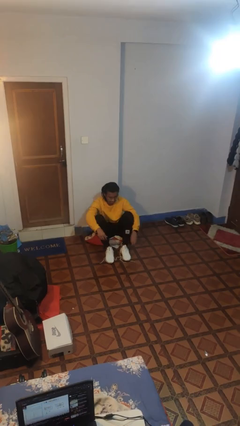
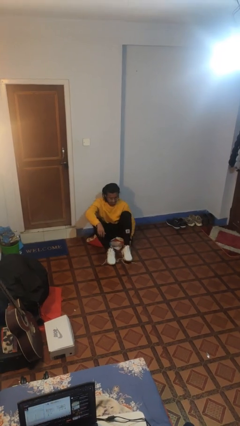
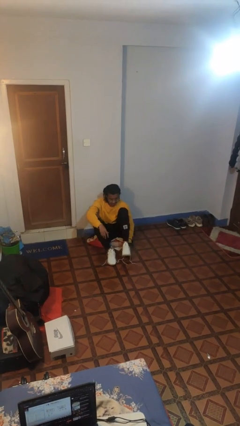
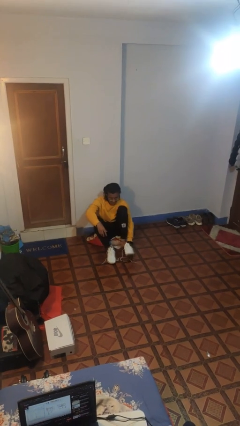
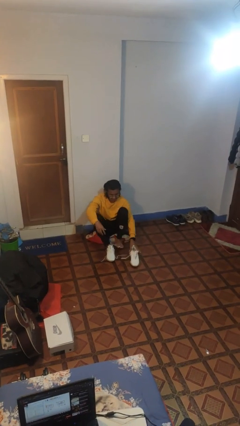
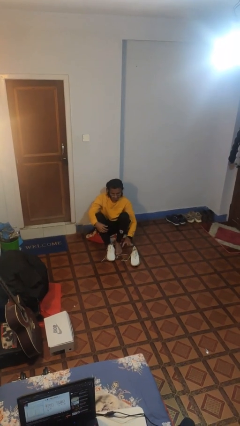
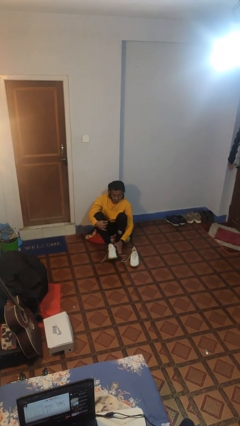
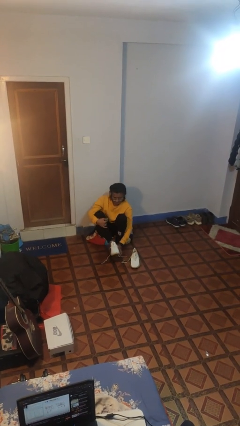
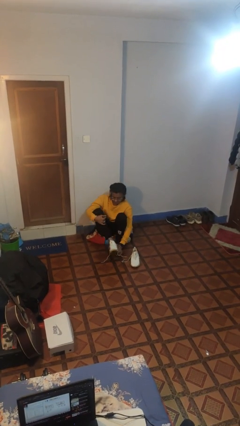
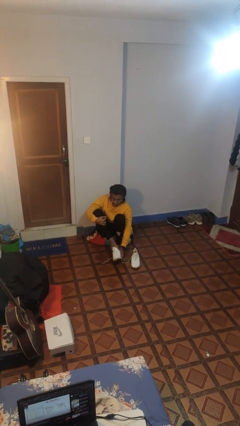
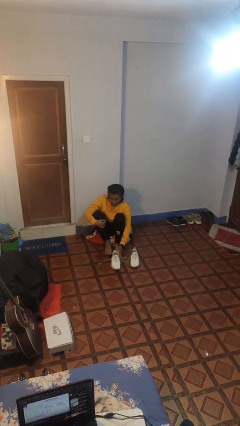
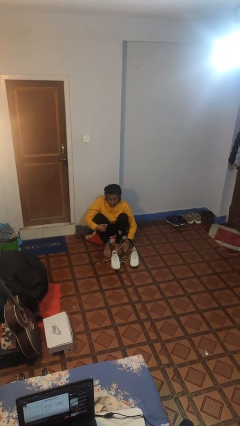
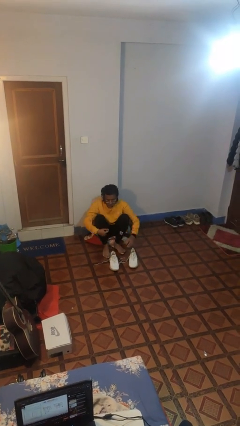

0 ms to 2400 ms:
person takes off shoes

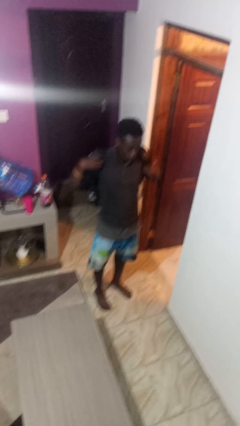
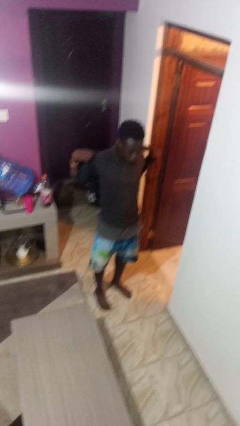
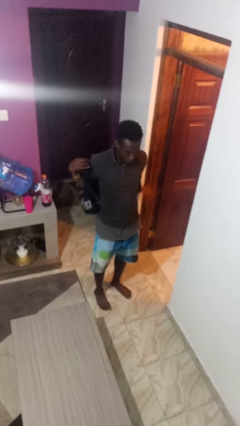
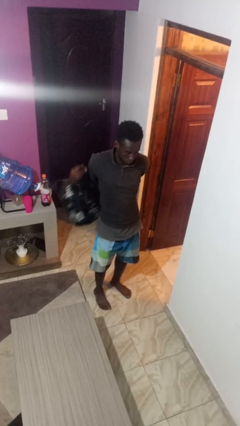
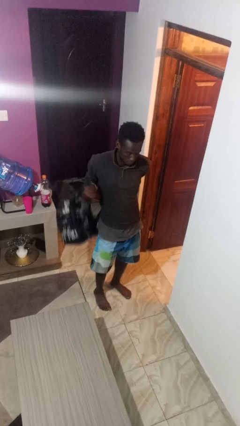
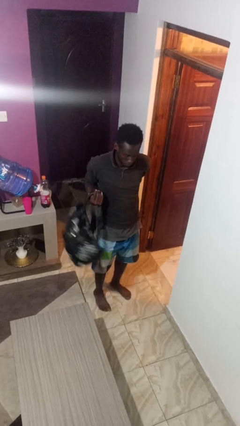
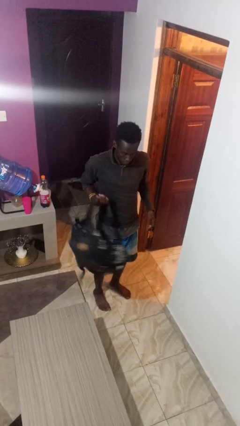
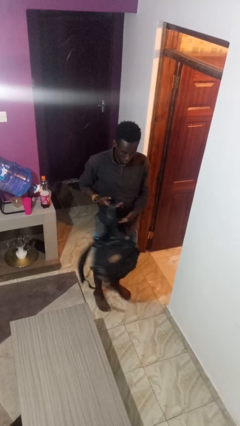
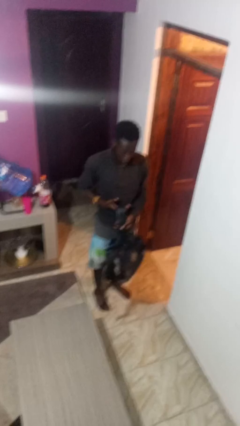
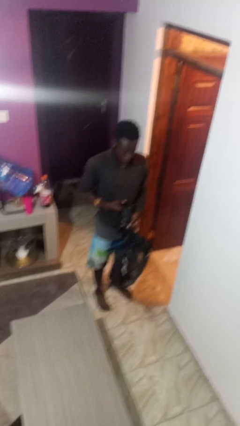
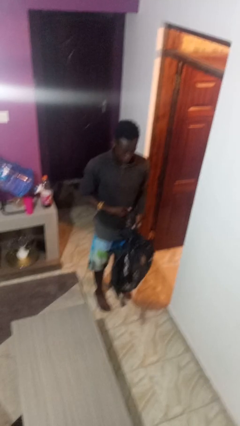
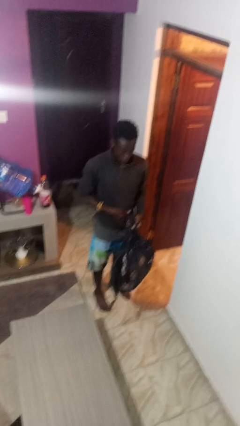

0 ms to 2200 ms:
person takes off backpack

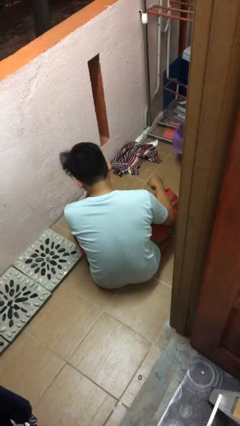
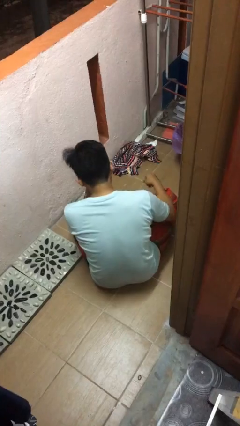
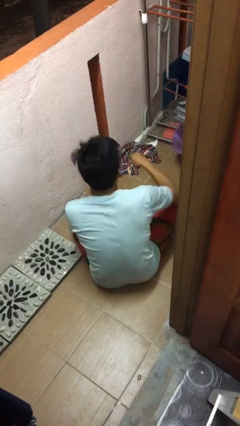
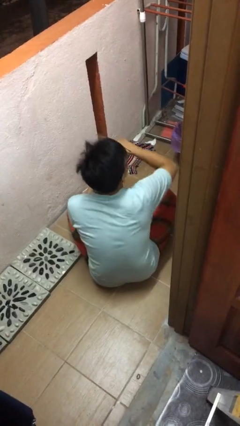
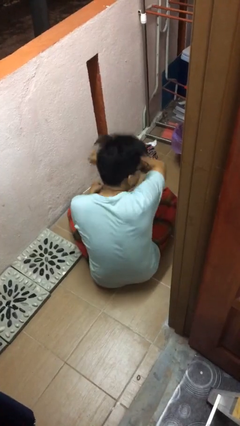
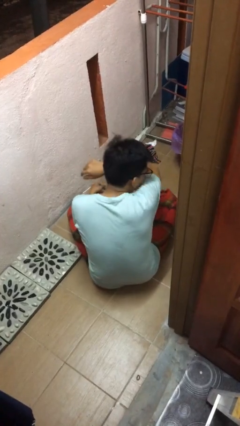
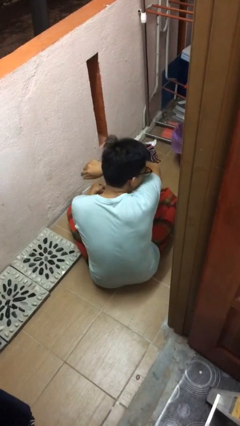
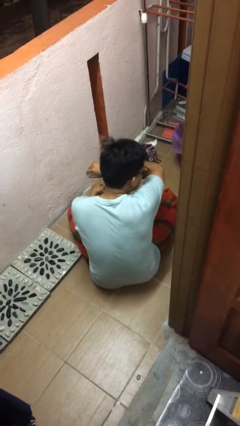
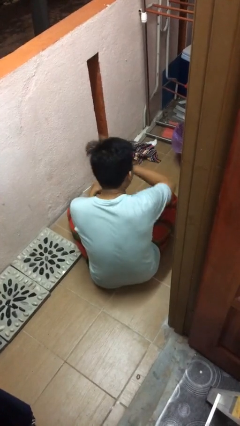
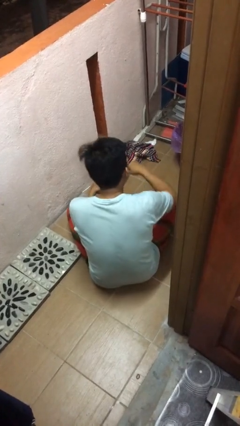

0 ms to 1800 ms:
person sneezes into arm

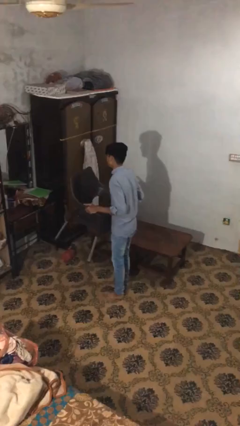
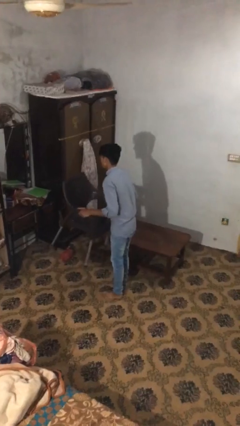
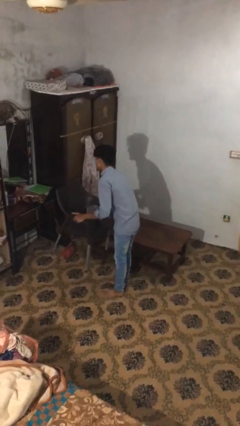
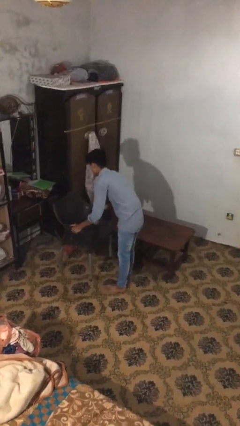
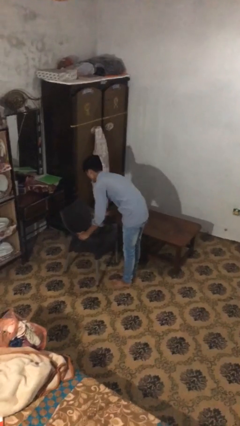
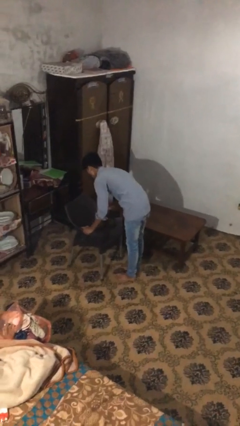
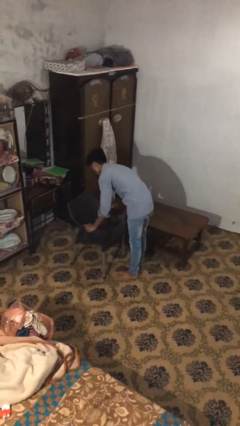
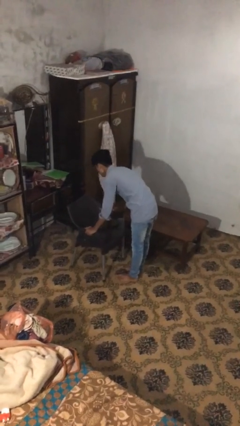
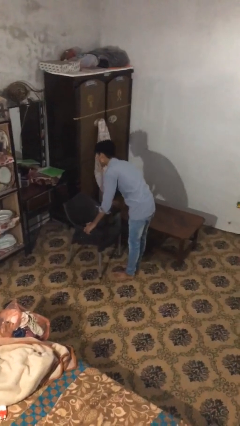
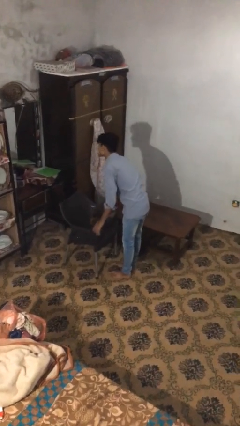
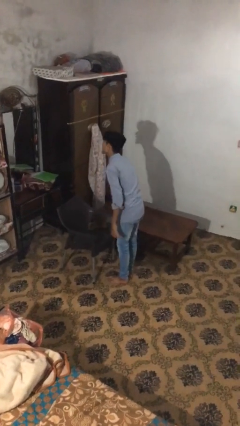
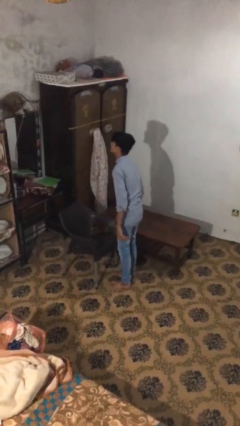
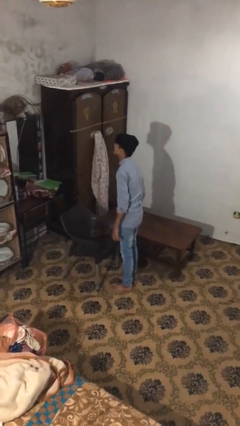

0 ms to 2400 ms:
person puts down object on floor

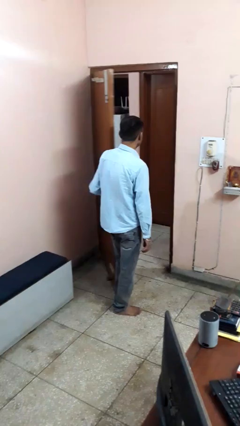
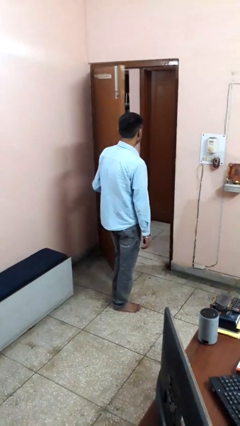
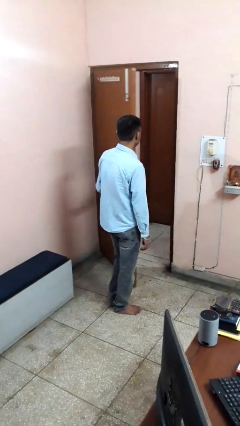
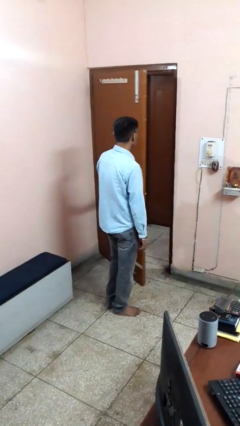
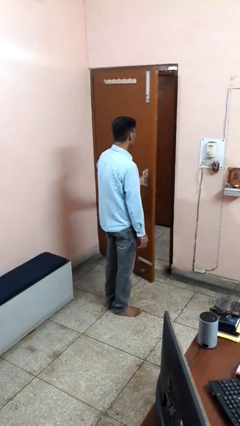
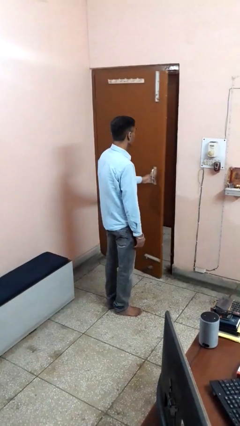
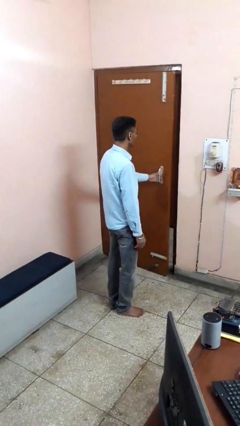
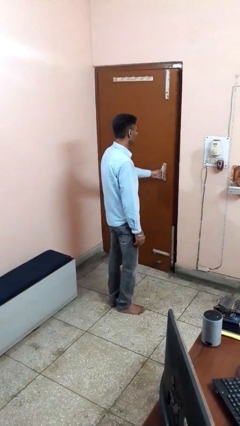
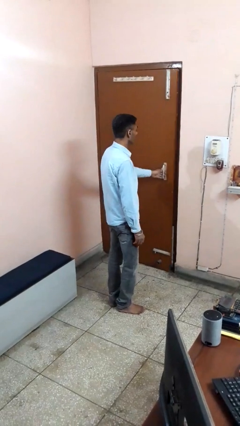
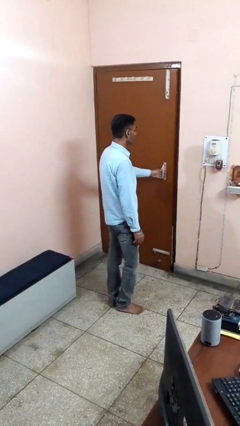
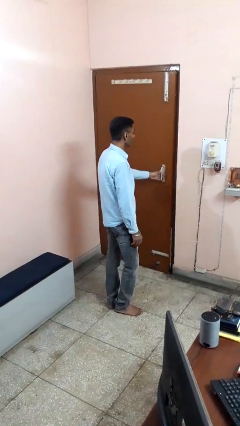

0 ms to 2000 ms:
person closes facility door

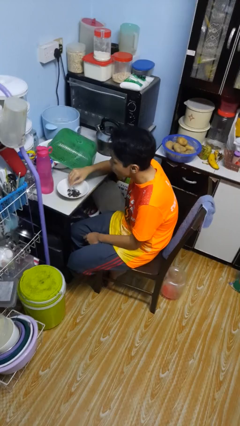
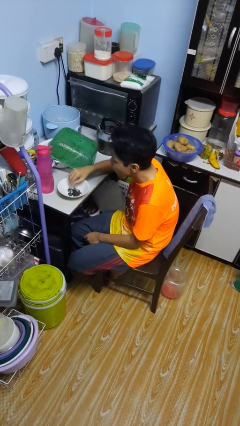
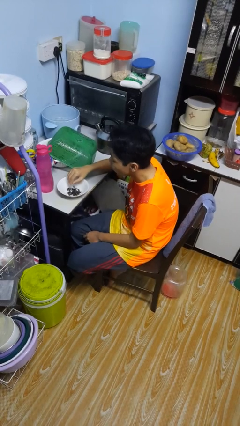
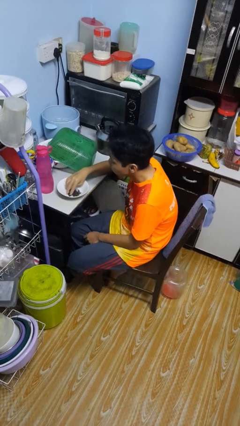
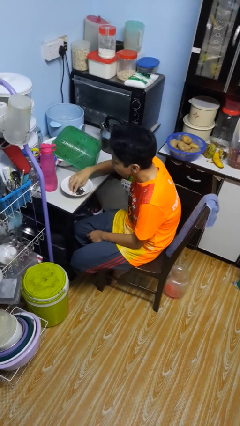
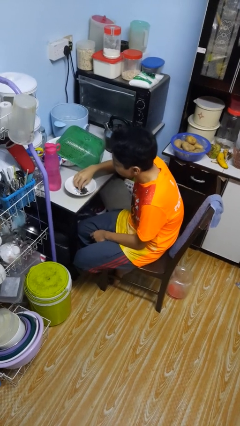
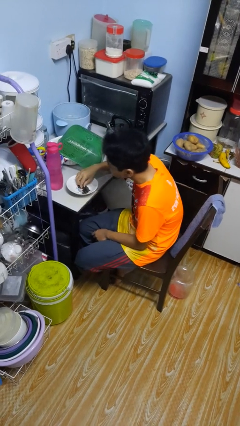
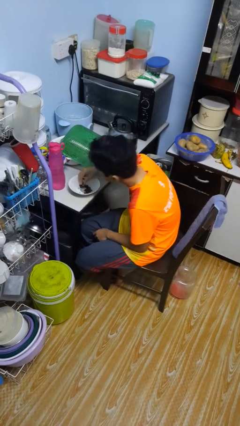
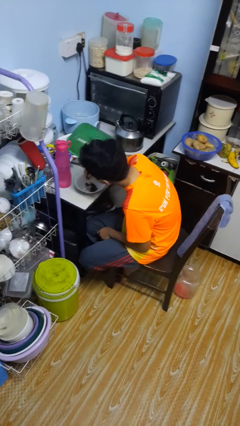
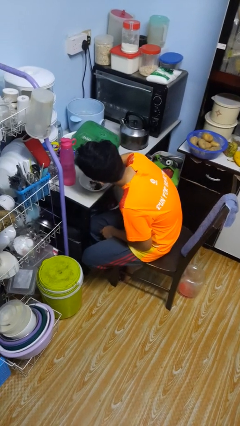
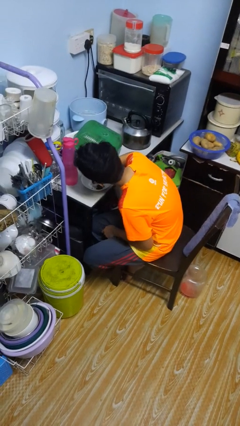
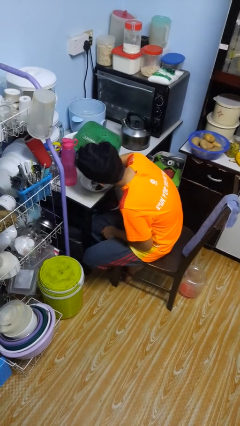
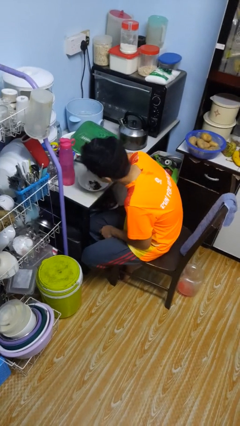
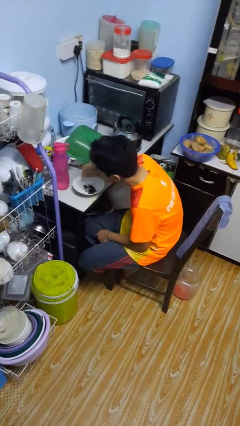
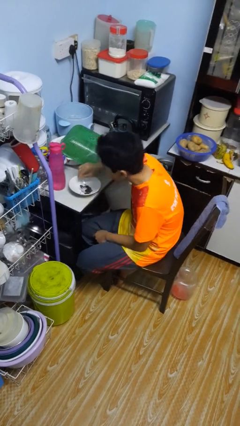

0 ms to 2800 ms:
person eats with hands

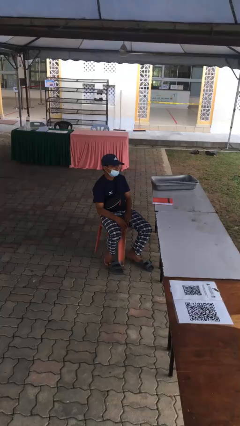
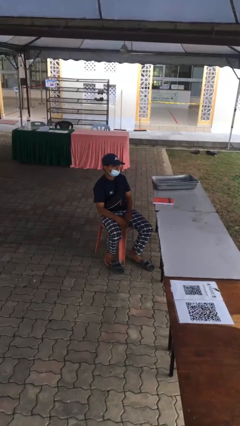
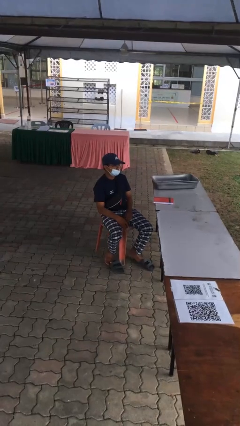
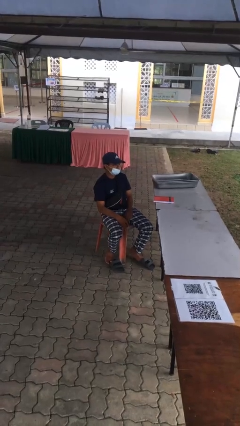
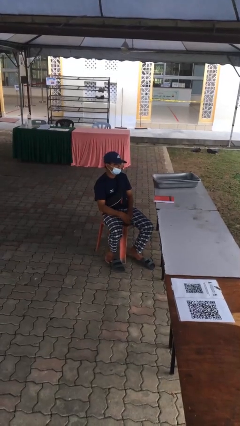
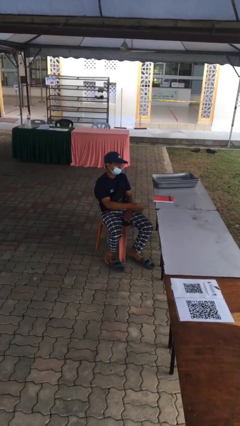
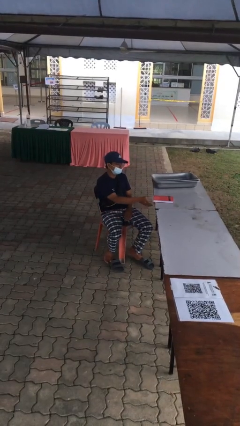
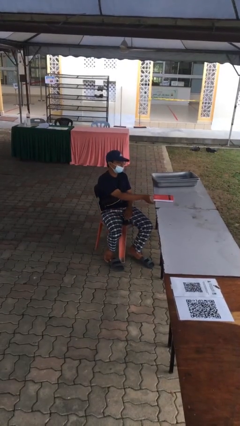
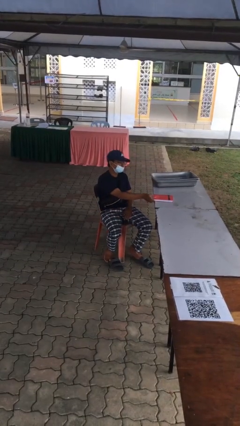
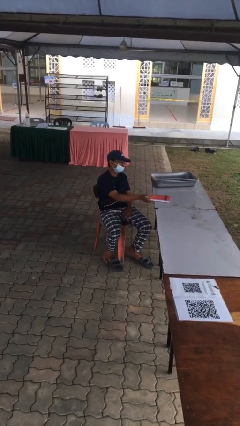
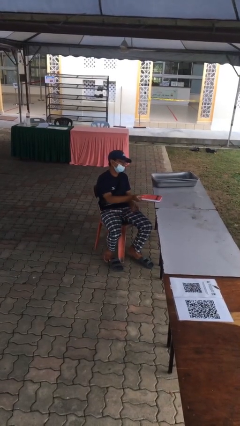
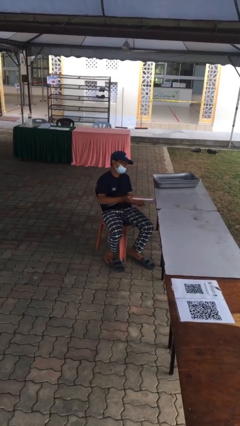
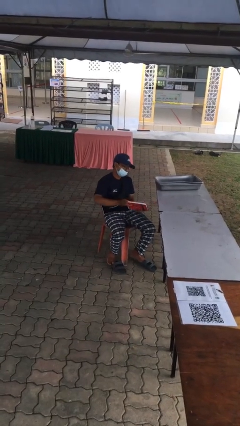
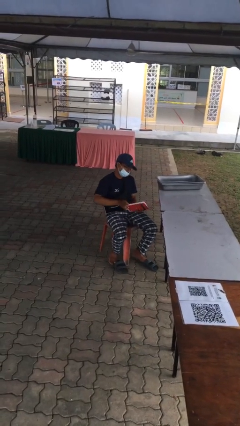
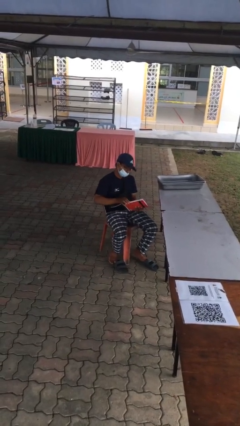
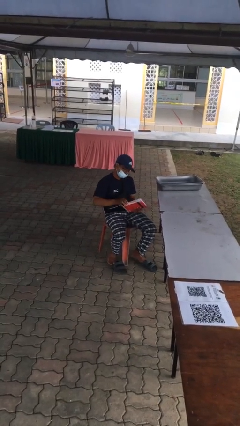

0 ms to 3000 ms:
person picks up object from table

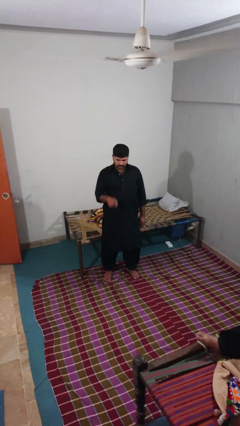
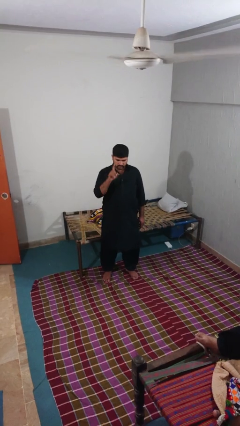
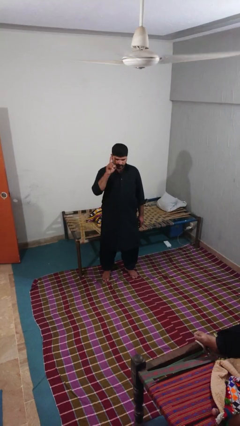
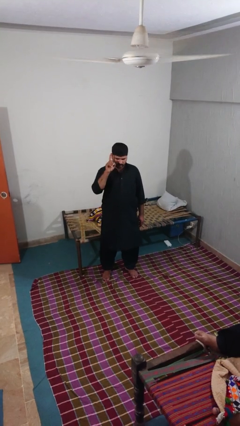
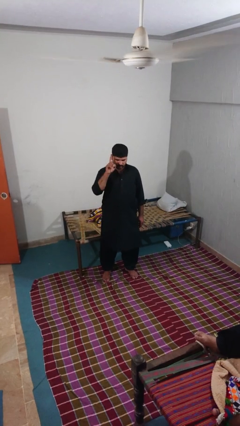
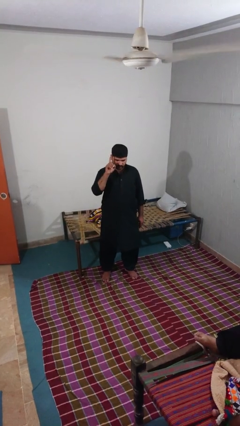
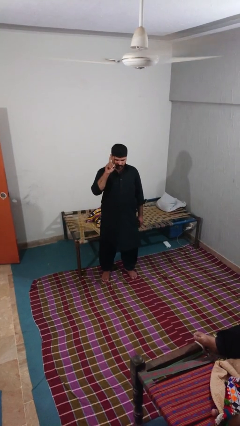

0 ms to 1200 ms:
person gestures swipe down
